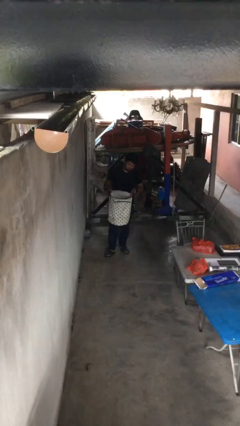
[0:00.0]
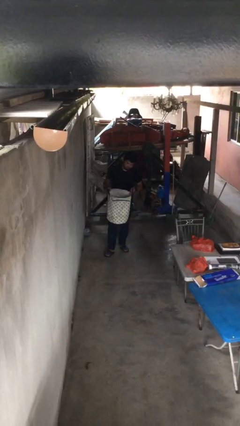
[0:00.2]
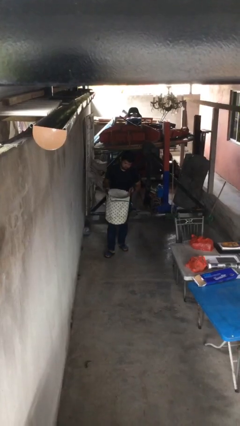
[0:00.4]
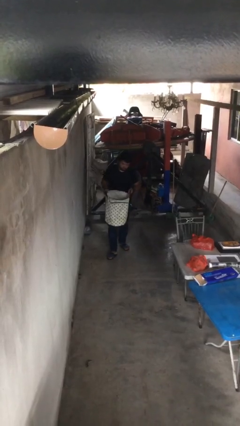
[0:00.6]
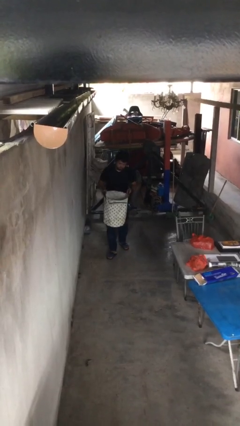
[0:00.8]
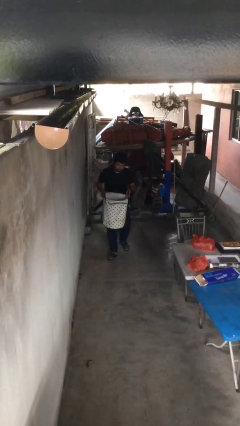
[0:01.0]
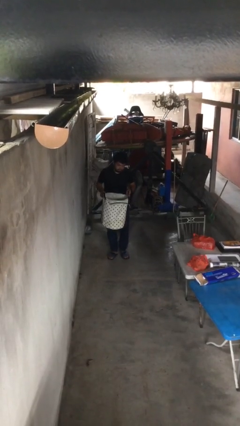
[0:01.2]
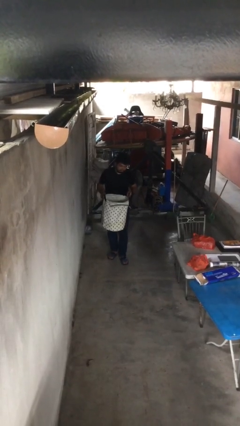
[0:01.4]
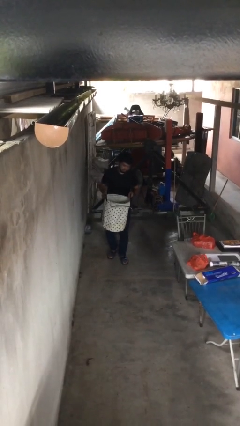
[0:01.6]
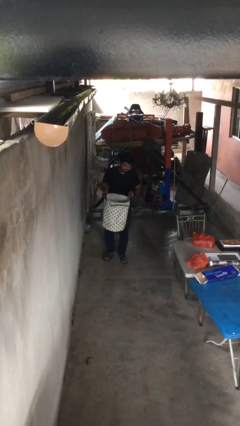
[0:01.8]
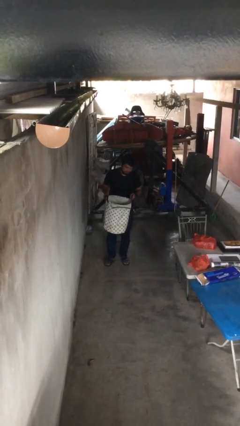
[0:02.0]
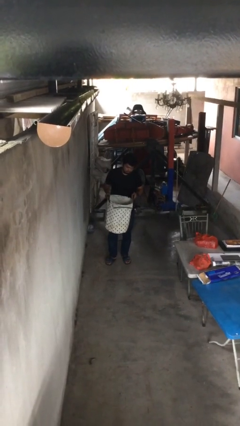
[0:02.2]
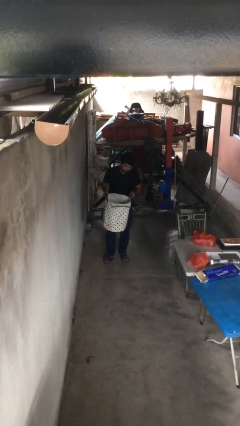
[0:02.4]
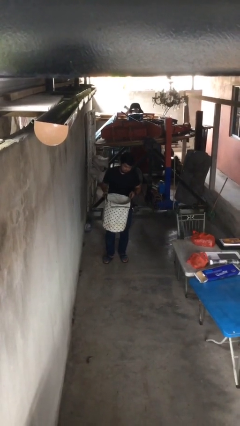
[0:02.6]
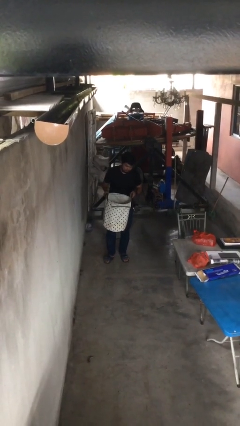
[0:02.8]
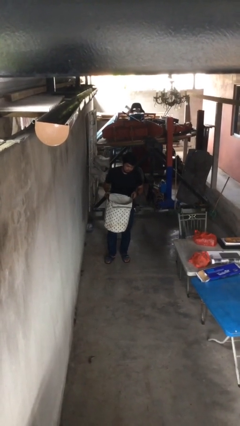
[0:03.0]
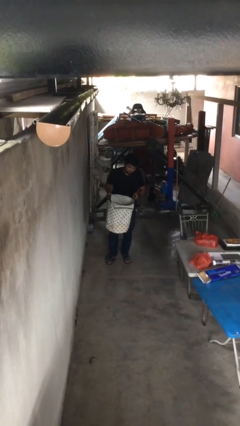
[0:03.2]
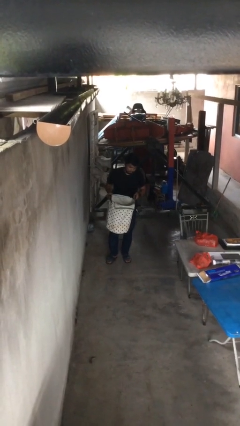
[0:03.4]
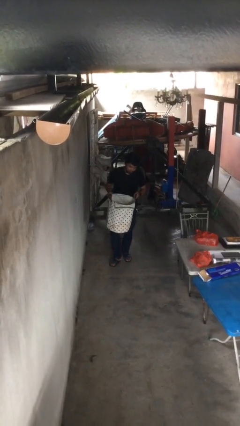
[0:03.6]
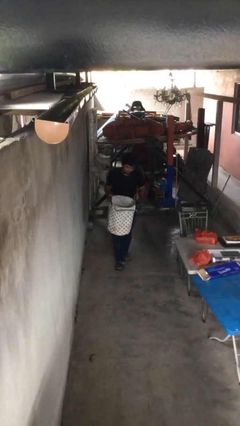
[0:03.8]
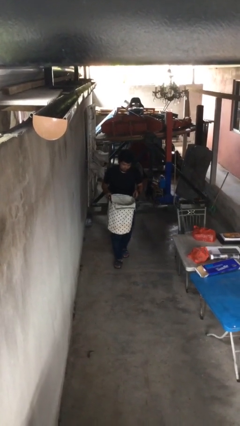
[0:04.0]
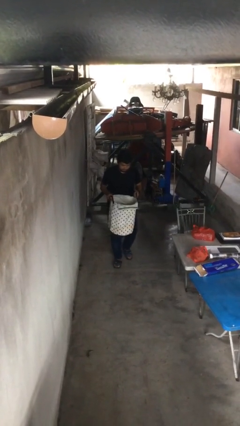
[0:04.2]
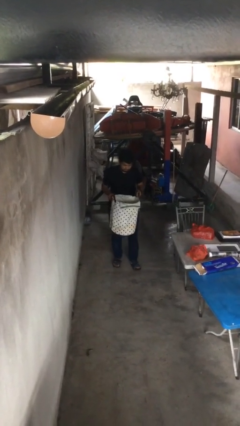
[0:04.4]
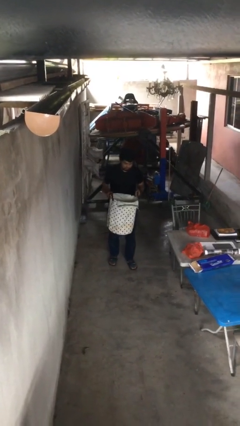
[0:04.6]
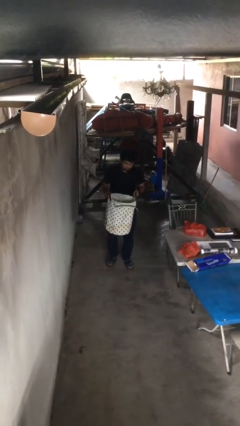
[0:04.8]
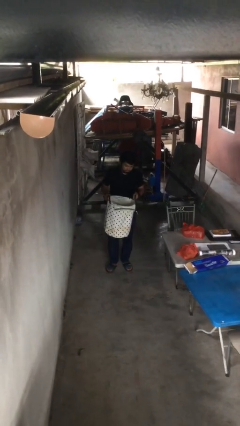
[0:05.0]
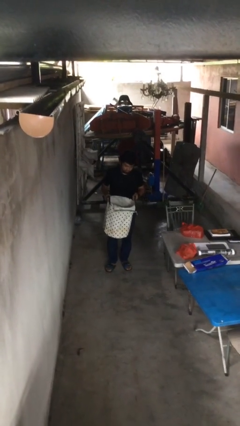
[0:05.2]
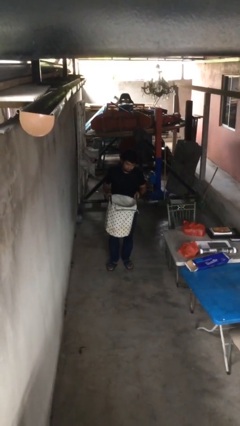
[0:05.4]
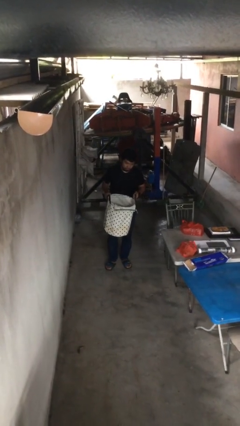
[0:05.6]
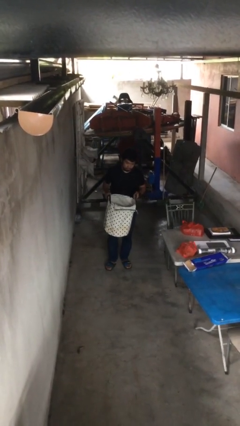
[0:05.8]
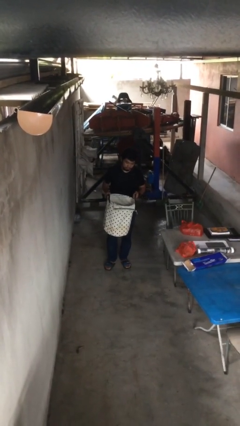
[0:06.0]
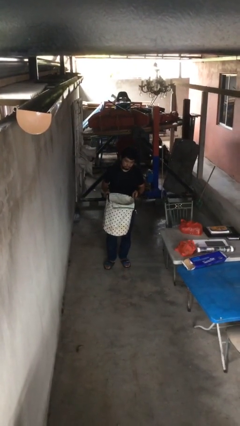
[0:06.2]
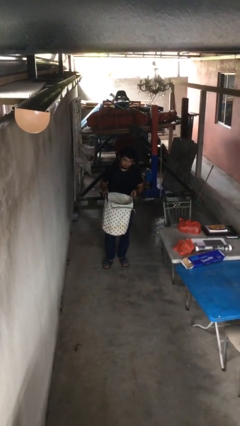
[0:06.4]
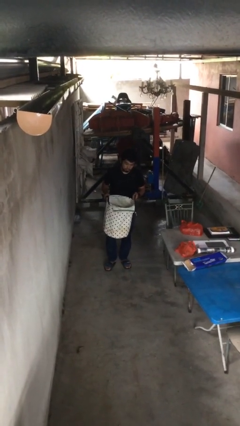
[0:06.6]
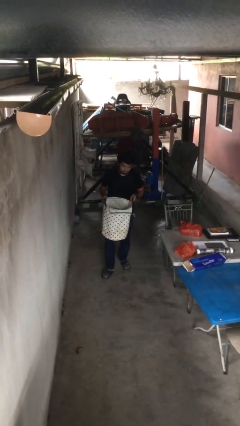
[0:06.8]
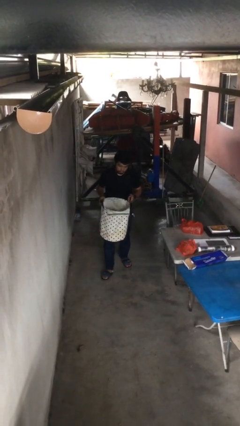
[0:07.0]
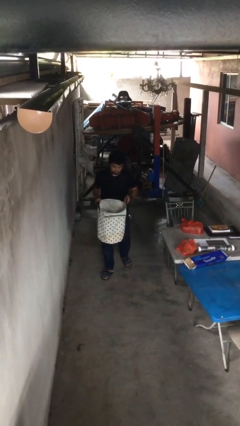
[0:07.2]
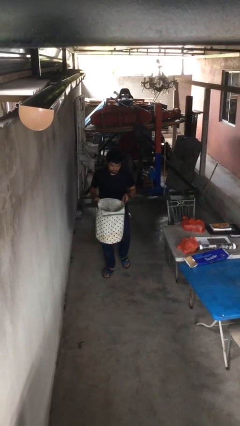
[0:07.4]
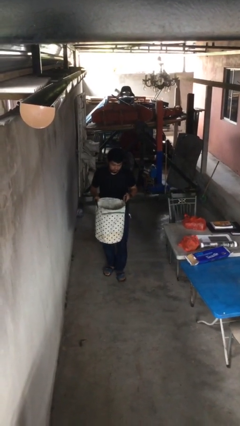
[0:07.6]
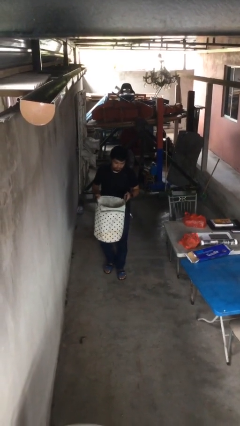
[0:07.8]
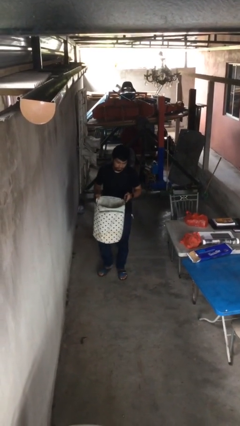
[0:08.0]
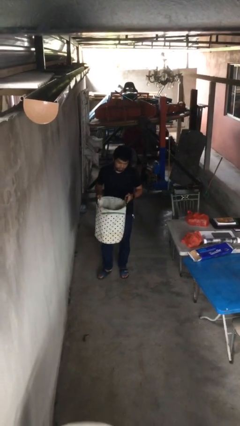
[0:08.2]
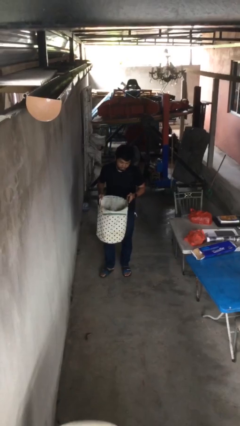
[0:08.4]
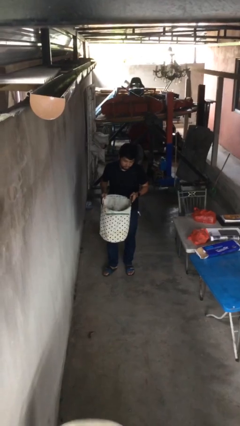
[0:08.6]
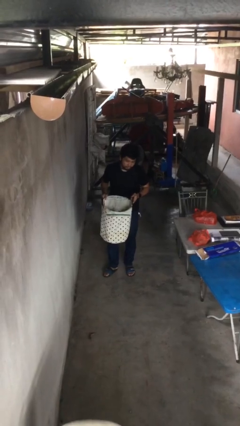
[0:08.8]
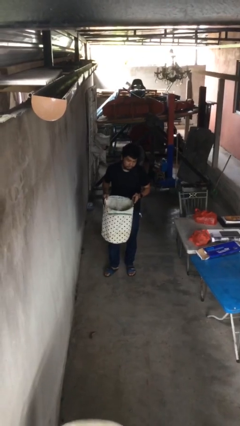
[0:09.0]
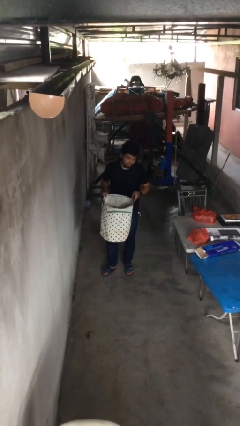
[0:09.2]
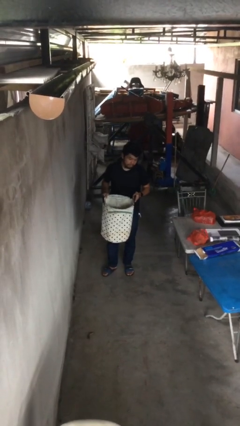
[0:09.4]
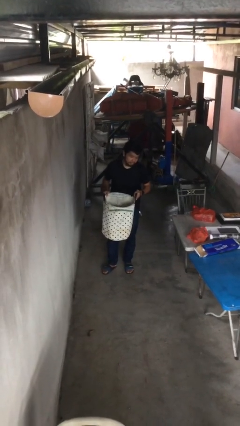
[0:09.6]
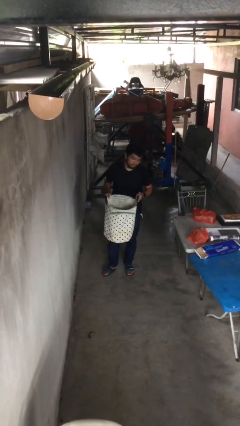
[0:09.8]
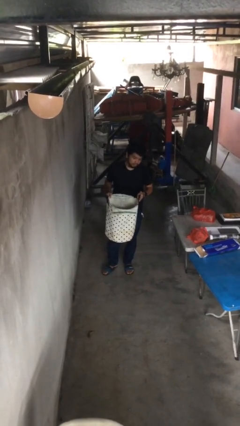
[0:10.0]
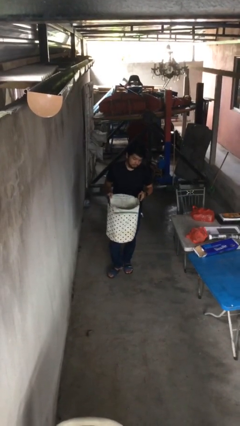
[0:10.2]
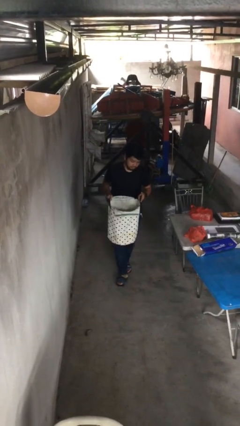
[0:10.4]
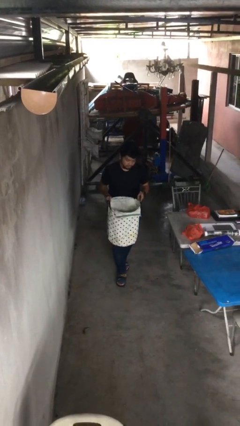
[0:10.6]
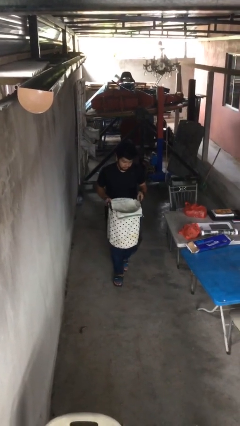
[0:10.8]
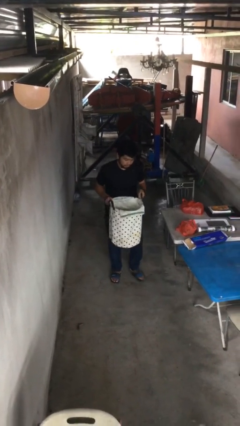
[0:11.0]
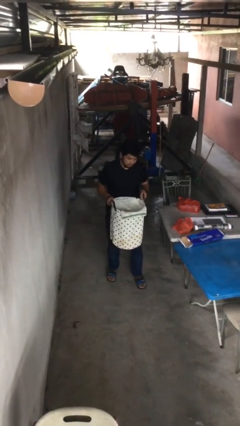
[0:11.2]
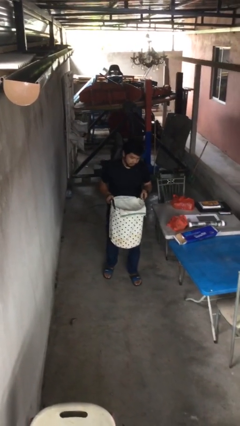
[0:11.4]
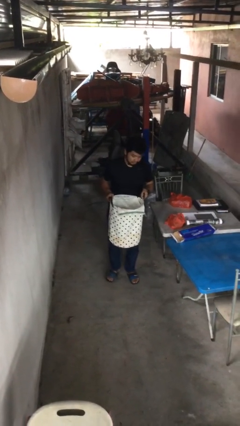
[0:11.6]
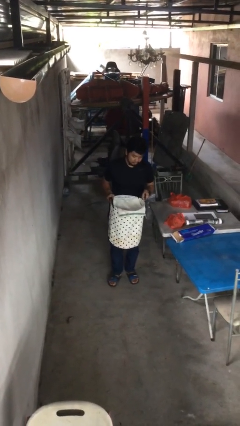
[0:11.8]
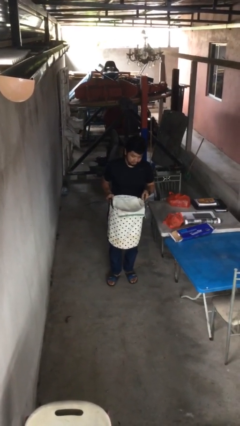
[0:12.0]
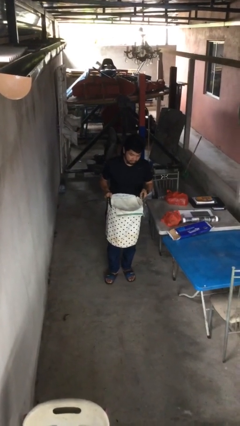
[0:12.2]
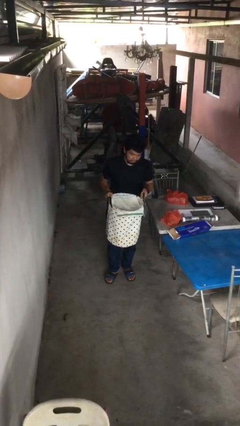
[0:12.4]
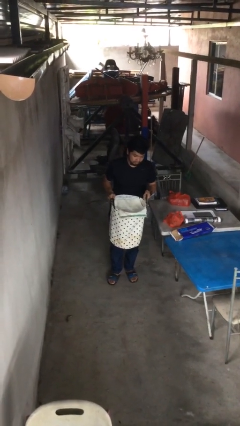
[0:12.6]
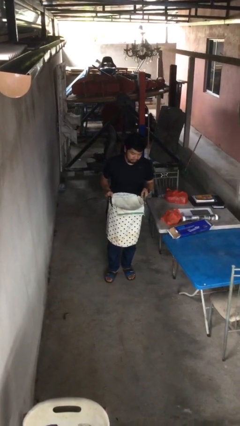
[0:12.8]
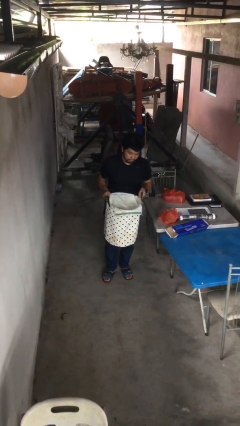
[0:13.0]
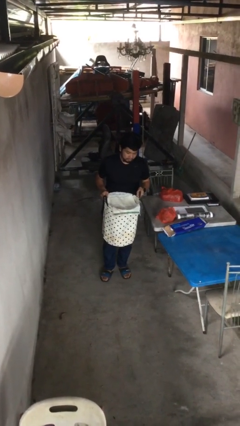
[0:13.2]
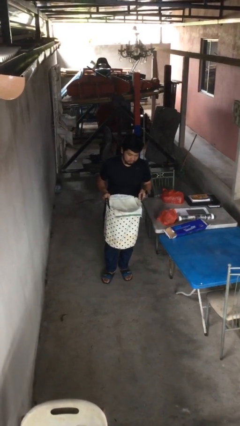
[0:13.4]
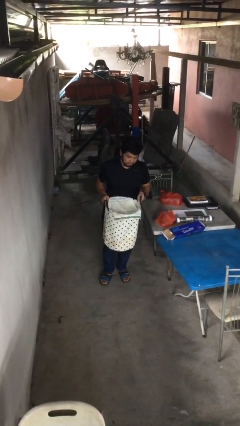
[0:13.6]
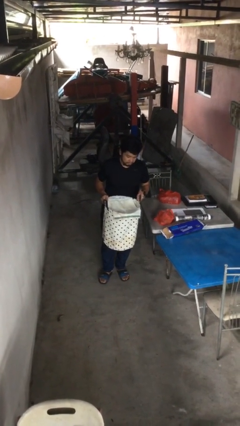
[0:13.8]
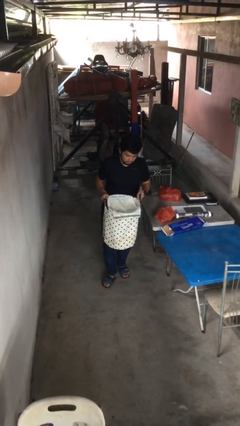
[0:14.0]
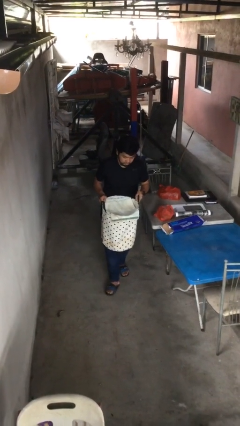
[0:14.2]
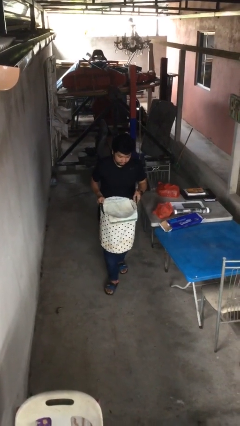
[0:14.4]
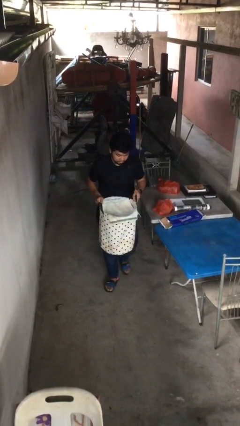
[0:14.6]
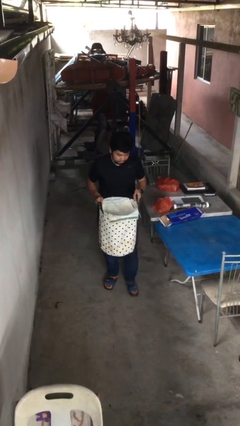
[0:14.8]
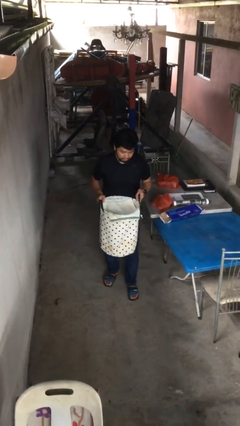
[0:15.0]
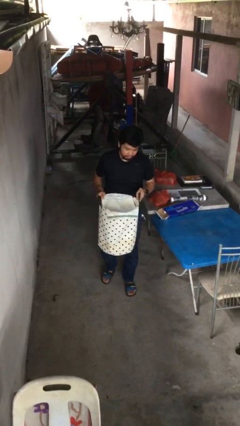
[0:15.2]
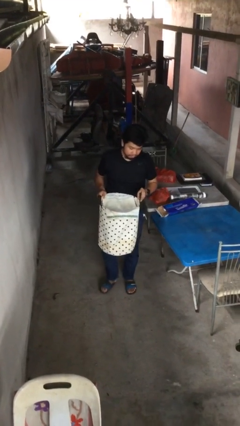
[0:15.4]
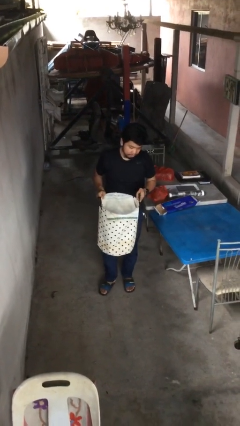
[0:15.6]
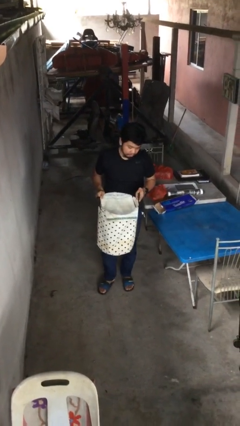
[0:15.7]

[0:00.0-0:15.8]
person carries laundry basket

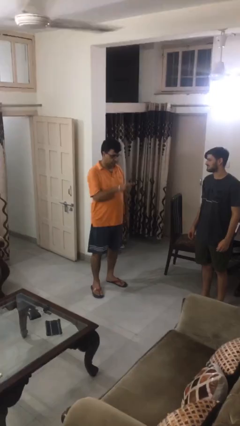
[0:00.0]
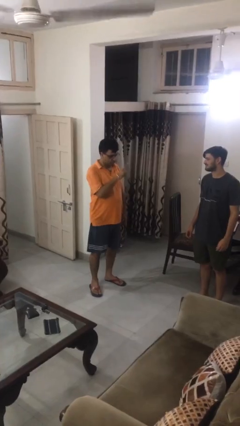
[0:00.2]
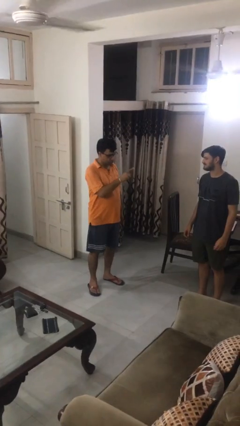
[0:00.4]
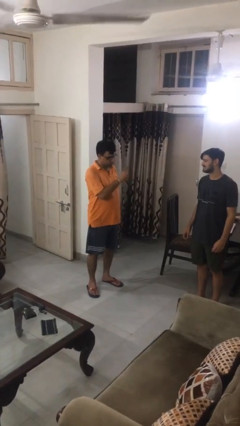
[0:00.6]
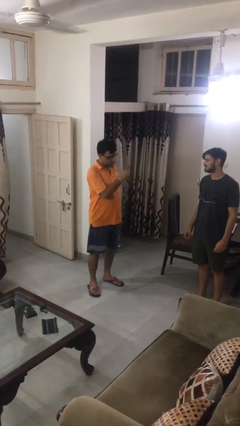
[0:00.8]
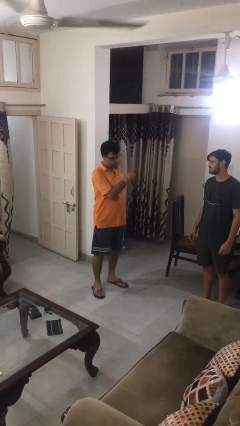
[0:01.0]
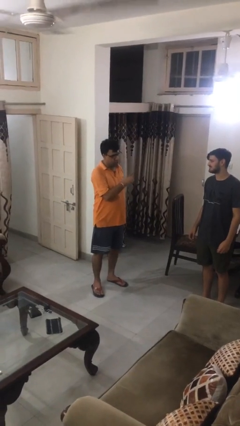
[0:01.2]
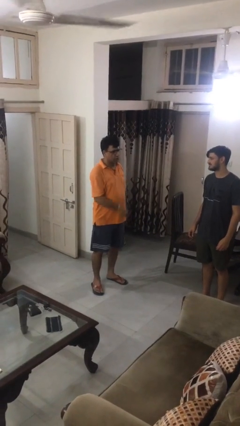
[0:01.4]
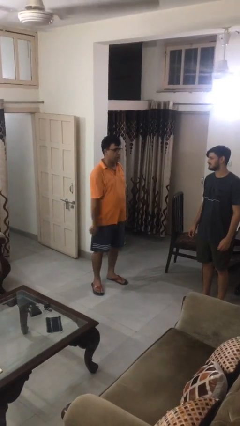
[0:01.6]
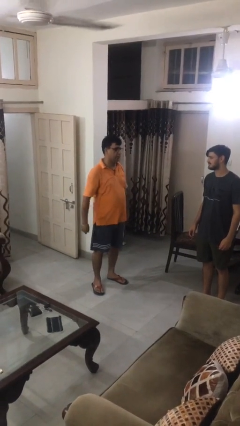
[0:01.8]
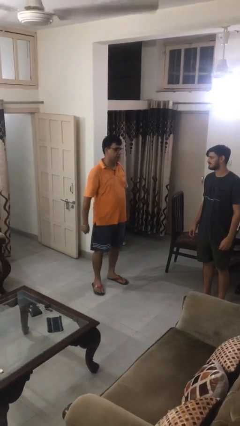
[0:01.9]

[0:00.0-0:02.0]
person points at person

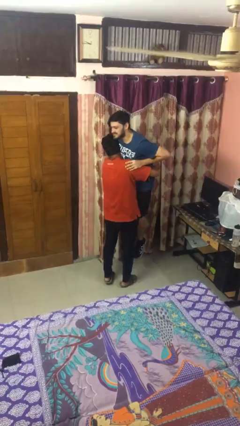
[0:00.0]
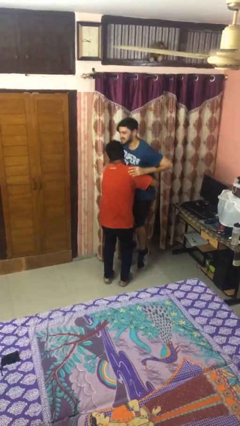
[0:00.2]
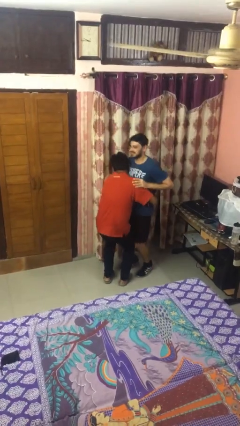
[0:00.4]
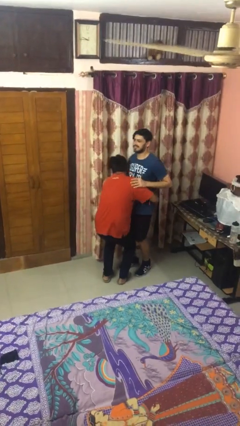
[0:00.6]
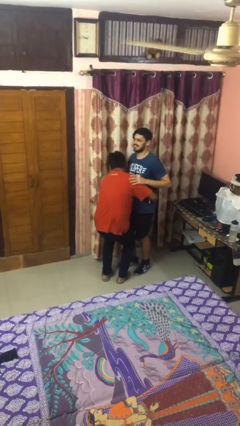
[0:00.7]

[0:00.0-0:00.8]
person puts down person
